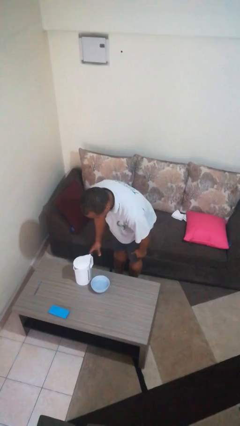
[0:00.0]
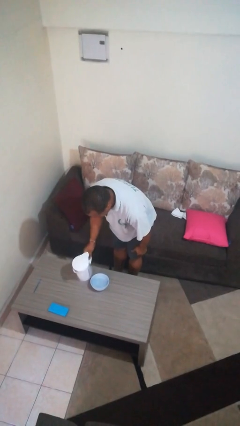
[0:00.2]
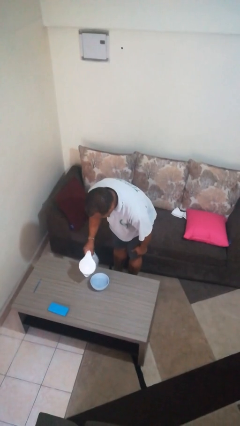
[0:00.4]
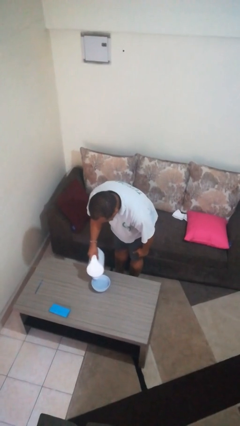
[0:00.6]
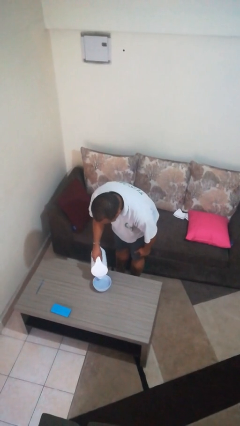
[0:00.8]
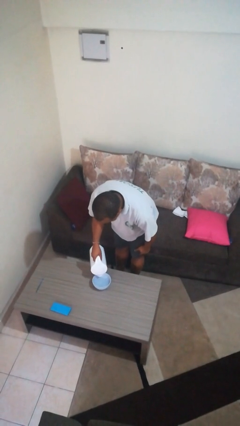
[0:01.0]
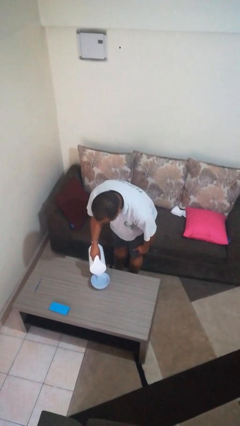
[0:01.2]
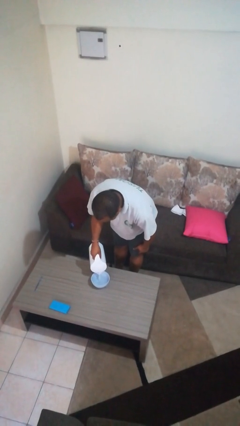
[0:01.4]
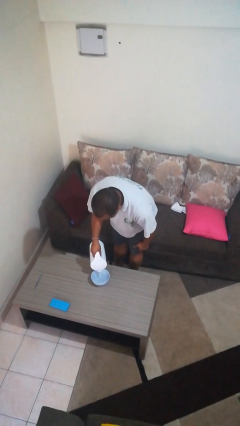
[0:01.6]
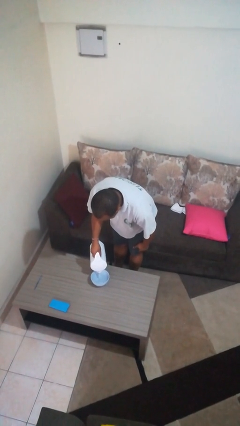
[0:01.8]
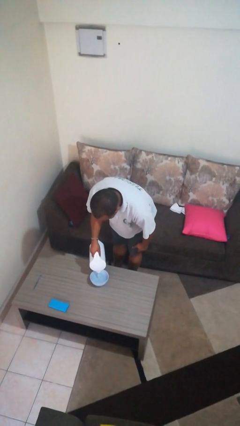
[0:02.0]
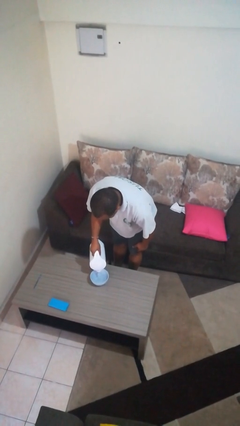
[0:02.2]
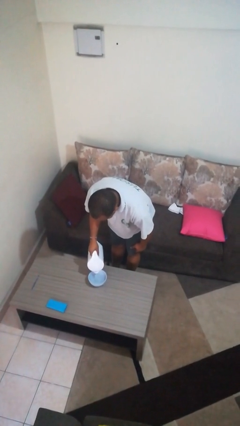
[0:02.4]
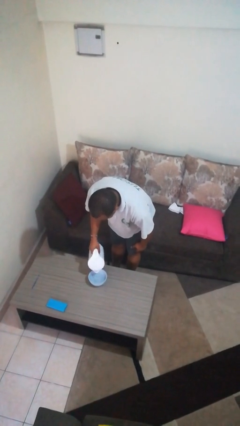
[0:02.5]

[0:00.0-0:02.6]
person pours into bowl

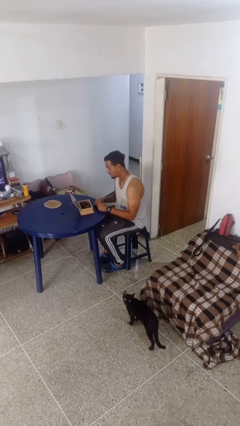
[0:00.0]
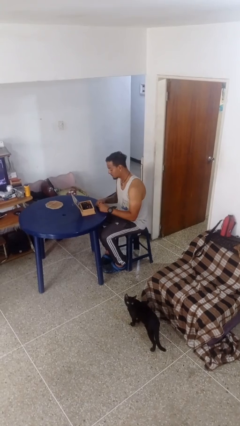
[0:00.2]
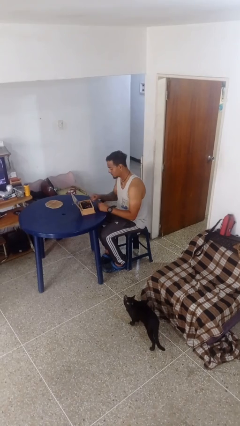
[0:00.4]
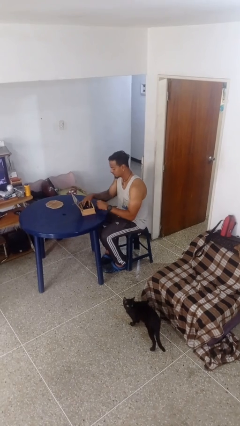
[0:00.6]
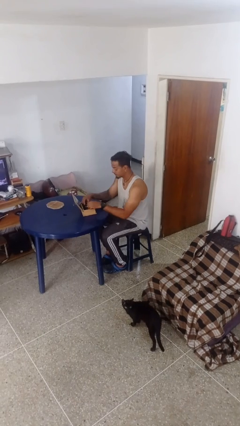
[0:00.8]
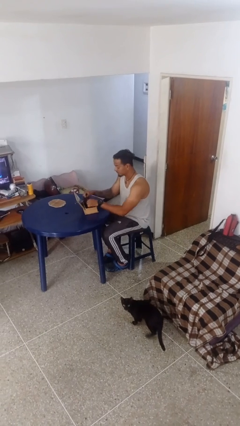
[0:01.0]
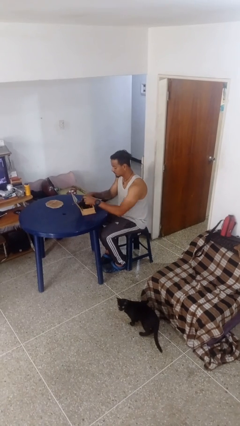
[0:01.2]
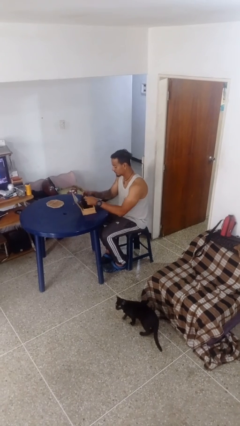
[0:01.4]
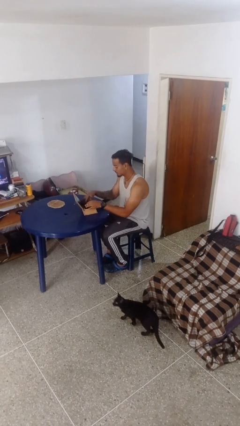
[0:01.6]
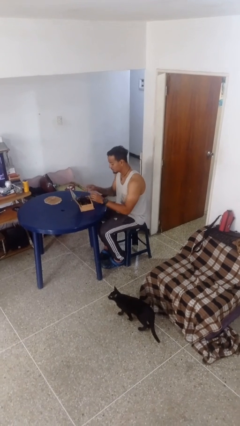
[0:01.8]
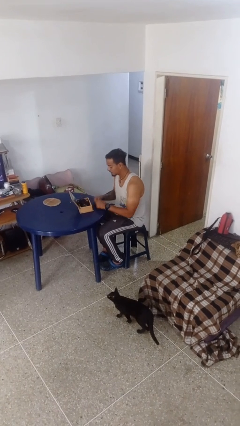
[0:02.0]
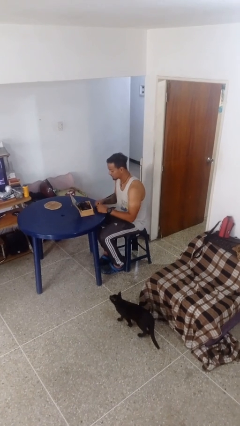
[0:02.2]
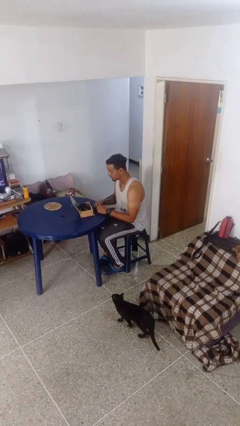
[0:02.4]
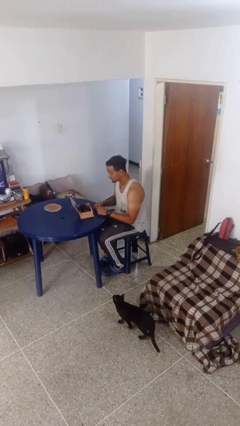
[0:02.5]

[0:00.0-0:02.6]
person searches jewelry box

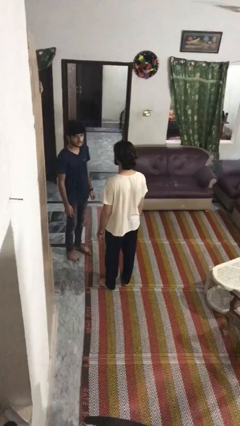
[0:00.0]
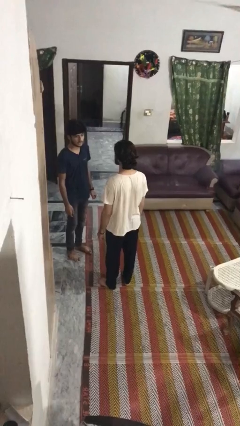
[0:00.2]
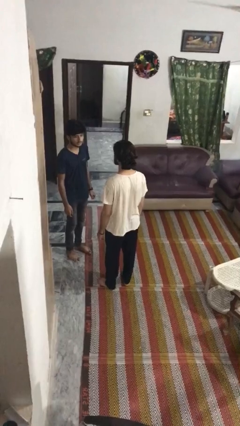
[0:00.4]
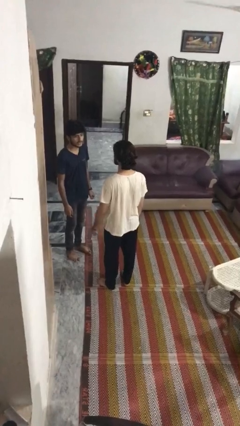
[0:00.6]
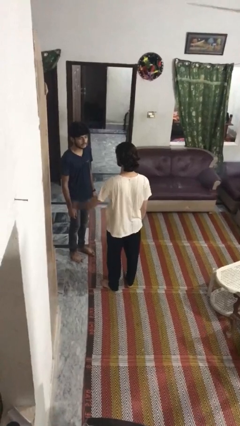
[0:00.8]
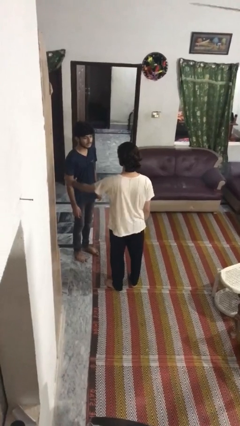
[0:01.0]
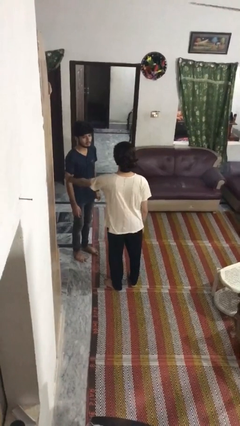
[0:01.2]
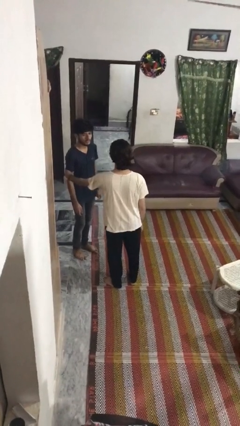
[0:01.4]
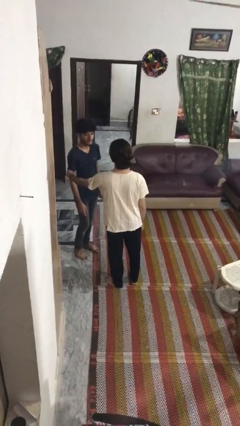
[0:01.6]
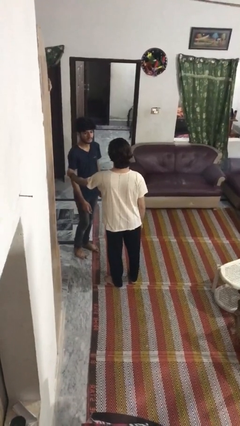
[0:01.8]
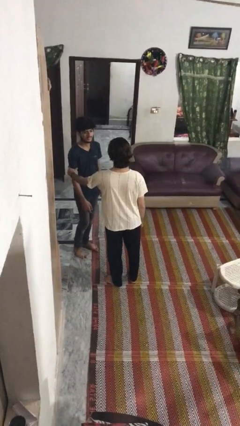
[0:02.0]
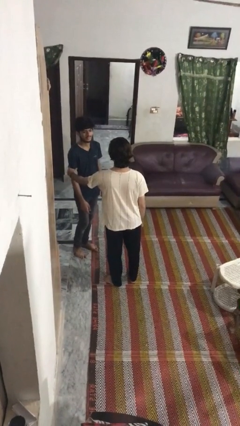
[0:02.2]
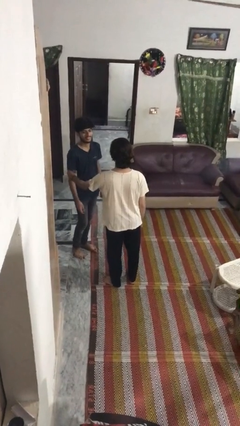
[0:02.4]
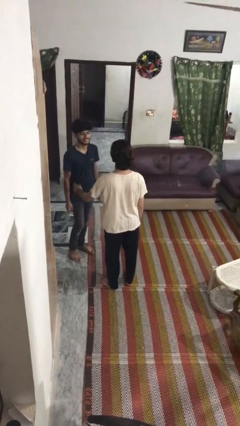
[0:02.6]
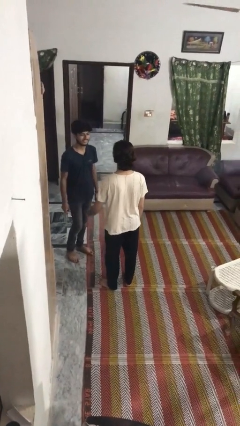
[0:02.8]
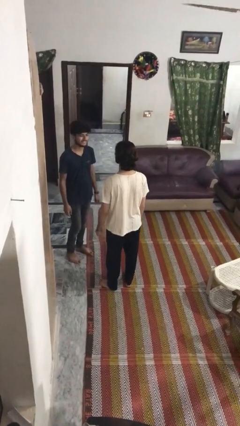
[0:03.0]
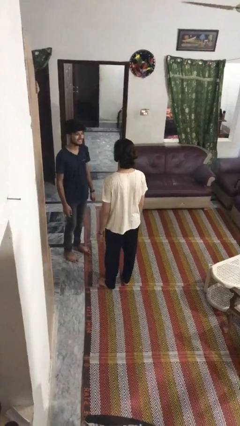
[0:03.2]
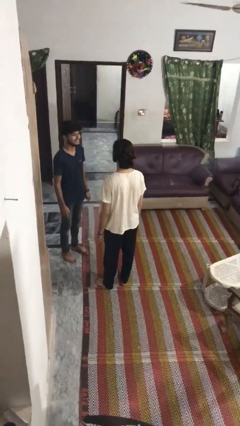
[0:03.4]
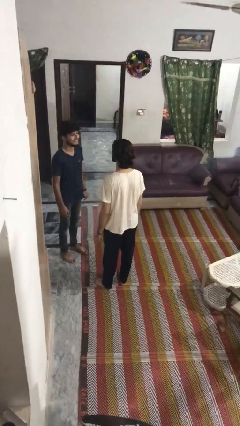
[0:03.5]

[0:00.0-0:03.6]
person grabs person by bicep

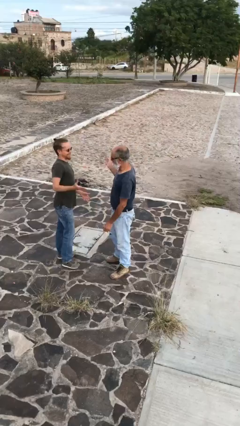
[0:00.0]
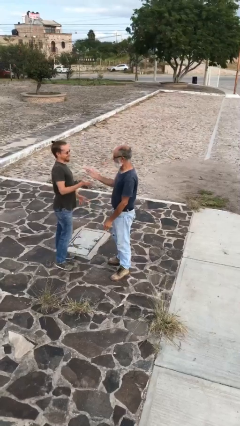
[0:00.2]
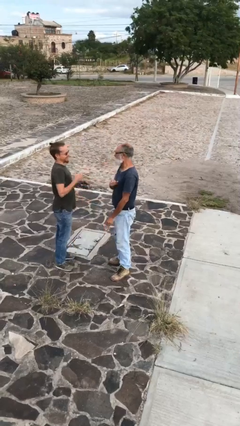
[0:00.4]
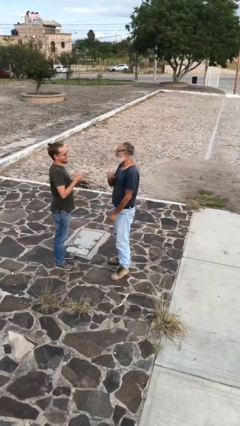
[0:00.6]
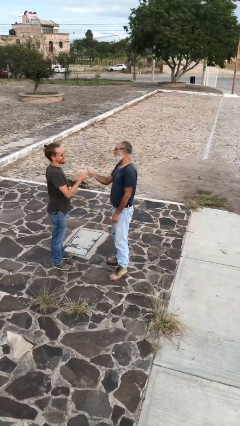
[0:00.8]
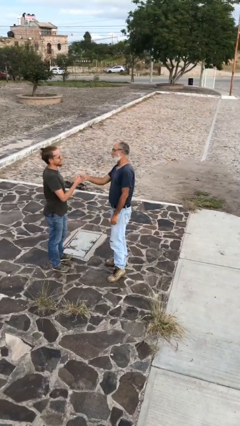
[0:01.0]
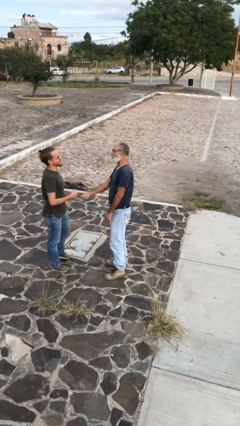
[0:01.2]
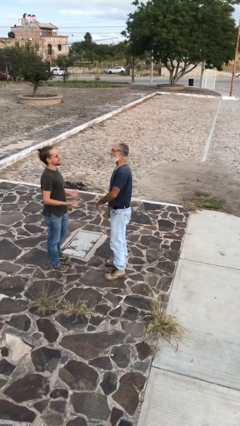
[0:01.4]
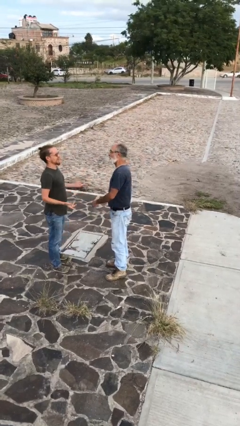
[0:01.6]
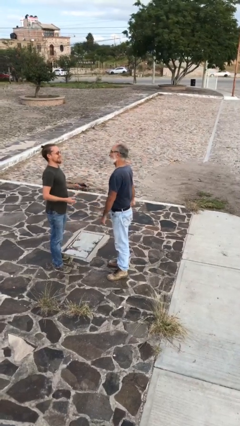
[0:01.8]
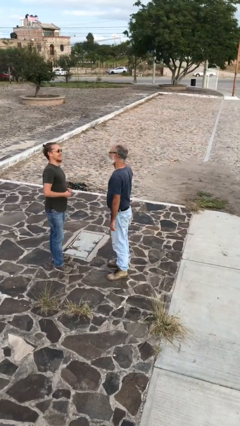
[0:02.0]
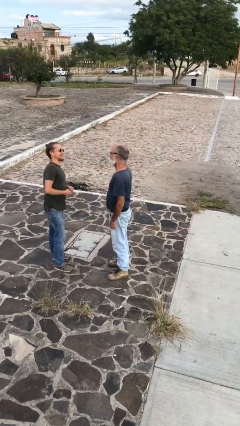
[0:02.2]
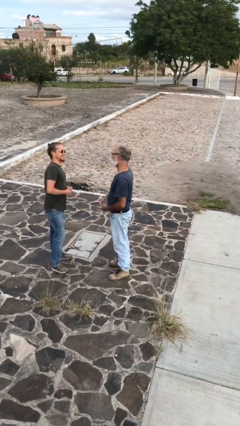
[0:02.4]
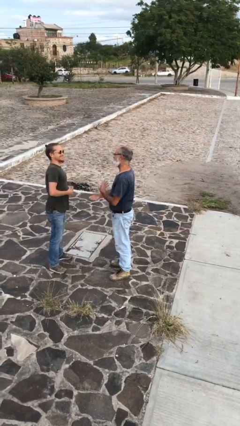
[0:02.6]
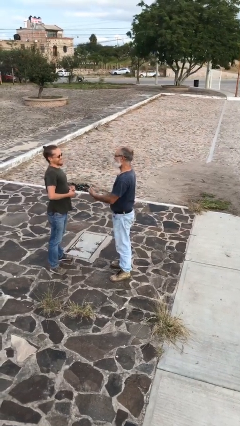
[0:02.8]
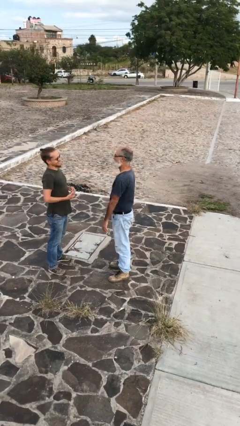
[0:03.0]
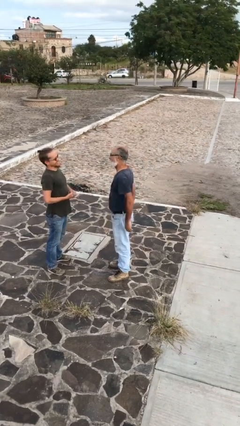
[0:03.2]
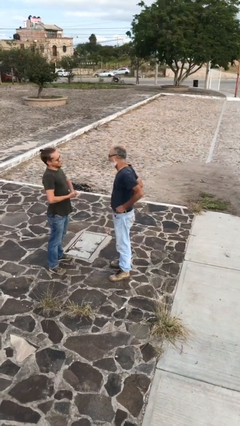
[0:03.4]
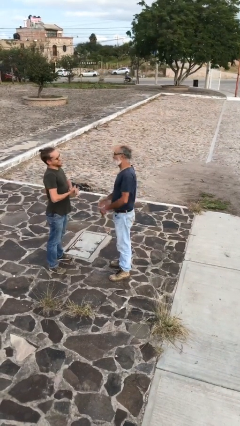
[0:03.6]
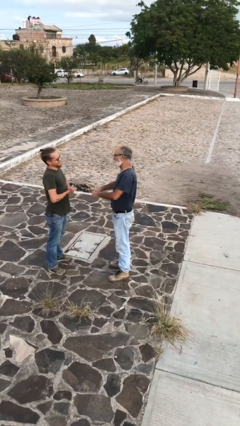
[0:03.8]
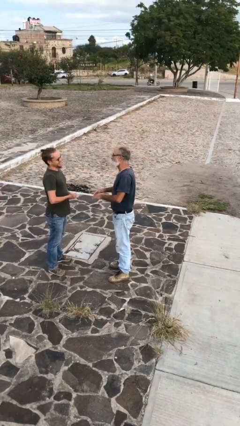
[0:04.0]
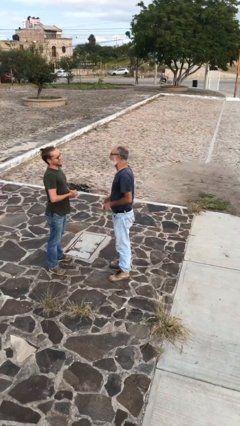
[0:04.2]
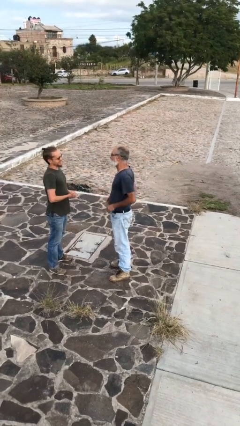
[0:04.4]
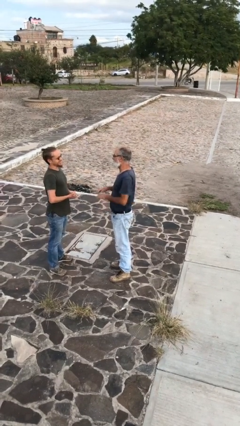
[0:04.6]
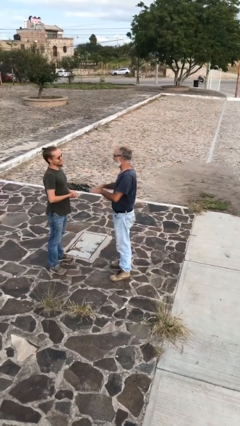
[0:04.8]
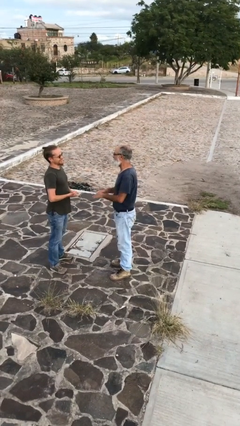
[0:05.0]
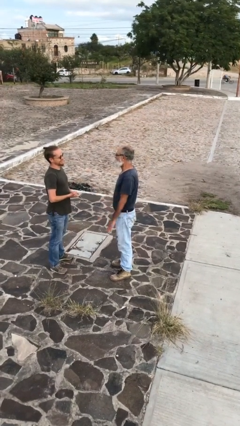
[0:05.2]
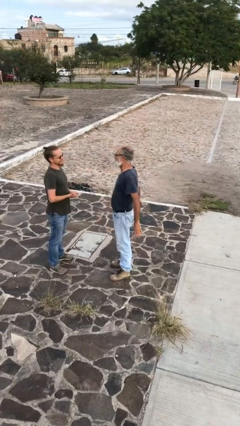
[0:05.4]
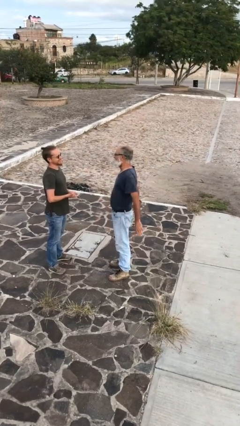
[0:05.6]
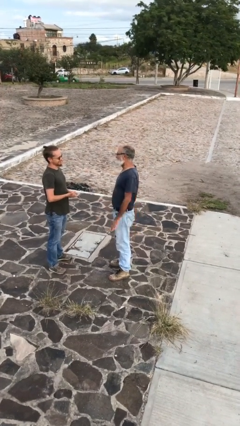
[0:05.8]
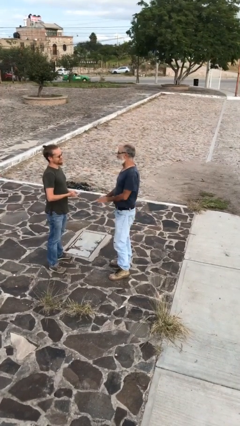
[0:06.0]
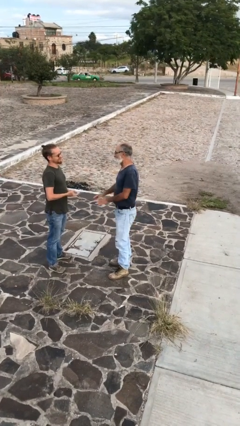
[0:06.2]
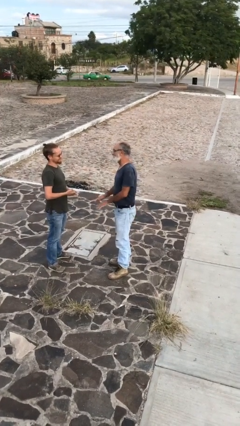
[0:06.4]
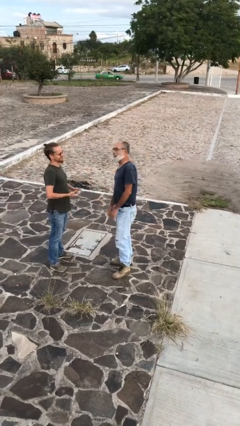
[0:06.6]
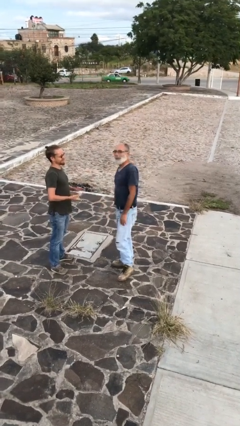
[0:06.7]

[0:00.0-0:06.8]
person talks to person

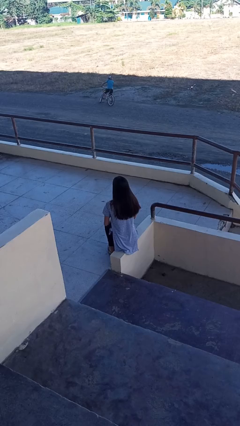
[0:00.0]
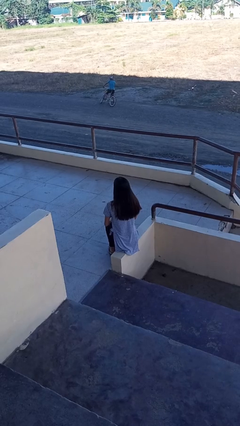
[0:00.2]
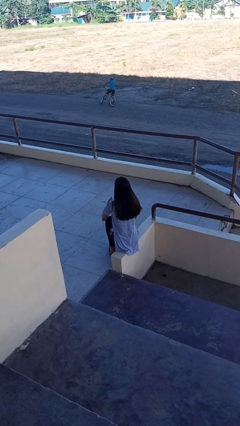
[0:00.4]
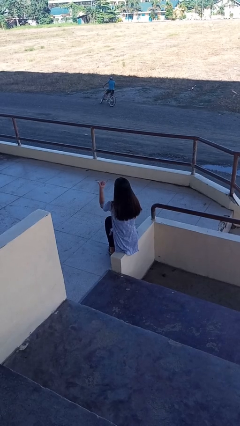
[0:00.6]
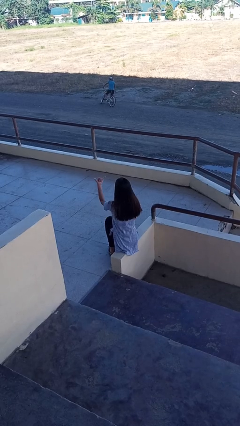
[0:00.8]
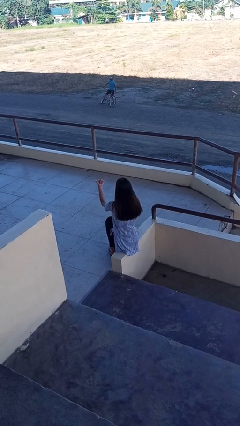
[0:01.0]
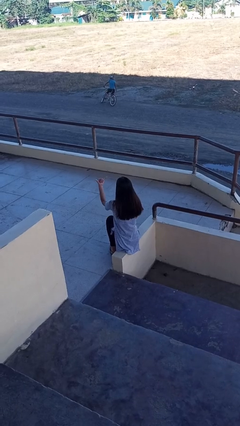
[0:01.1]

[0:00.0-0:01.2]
person gestures hang loose

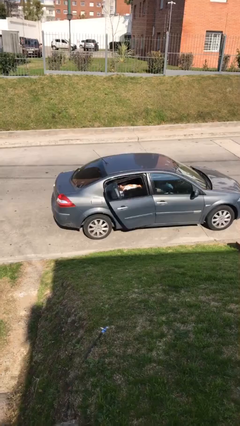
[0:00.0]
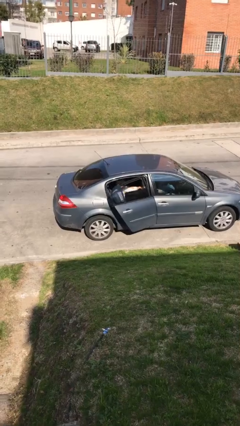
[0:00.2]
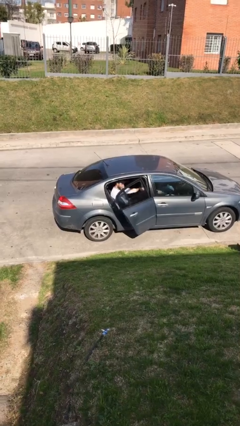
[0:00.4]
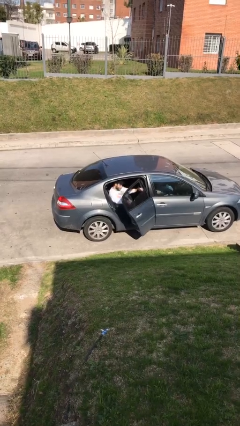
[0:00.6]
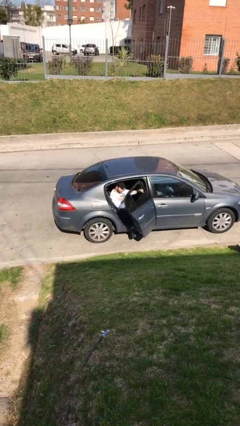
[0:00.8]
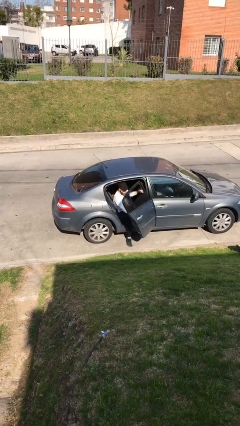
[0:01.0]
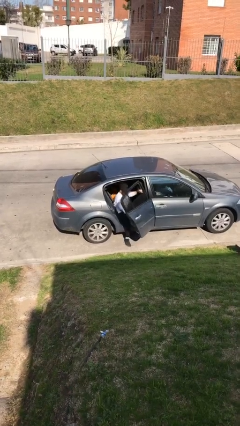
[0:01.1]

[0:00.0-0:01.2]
person opens car door
